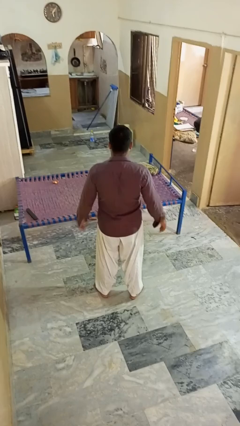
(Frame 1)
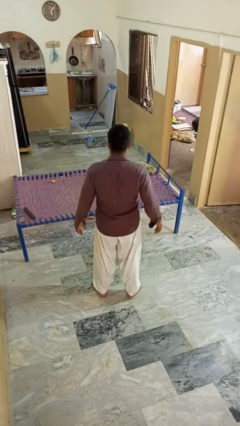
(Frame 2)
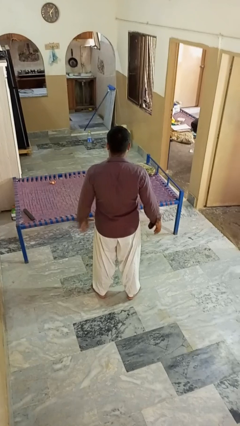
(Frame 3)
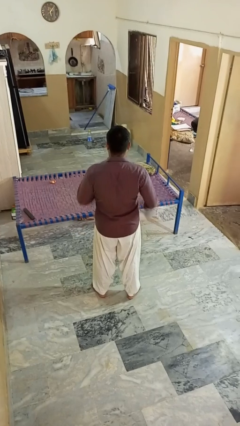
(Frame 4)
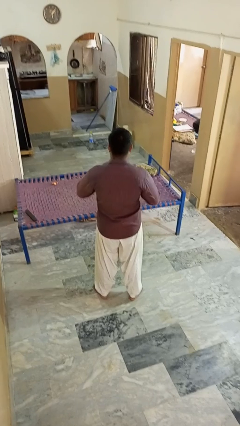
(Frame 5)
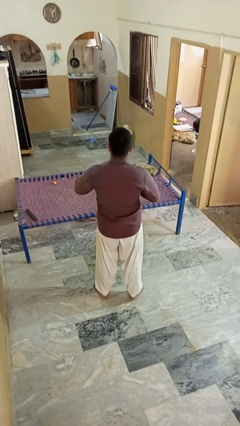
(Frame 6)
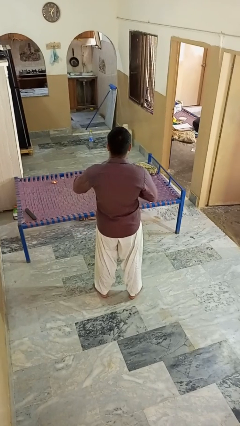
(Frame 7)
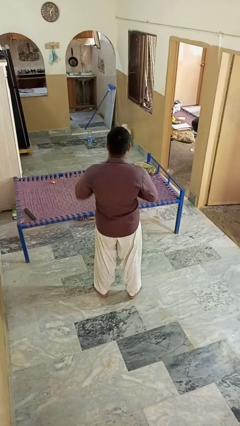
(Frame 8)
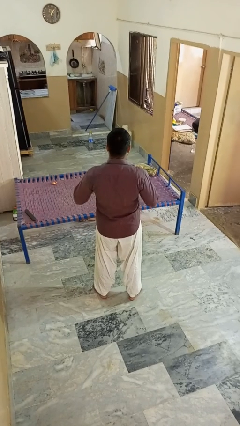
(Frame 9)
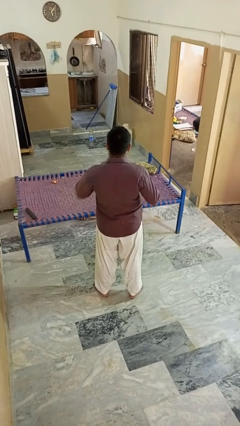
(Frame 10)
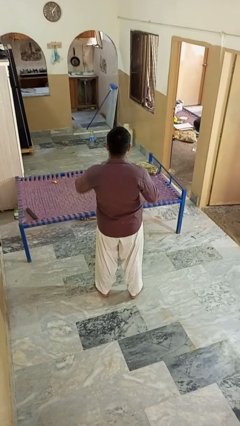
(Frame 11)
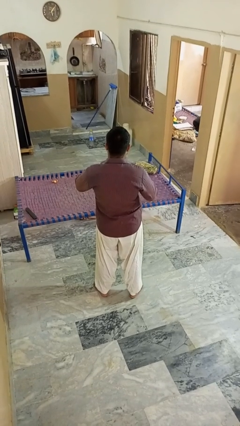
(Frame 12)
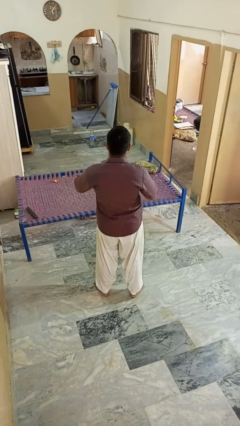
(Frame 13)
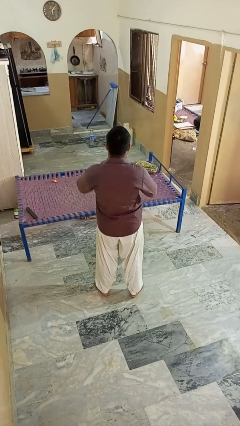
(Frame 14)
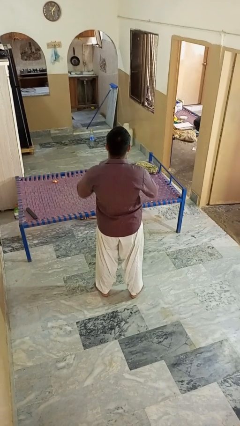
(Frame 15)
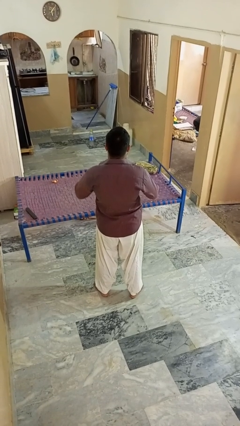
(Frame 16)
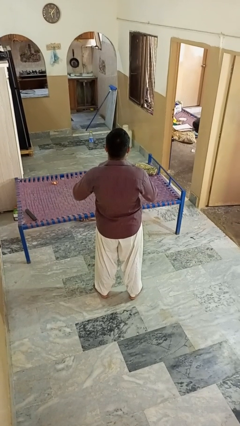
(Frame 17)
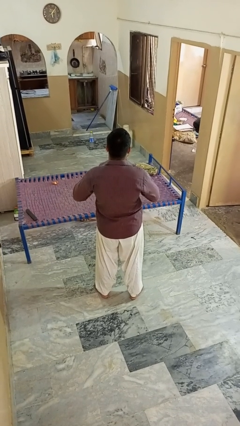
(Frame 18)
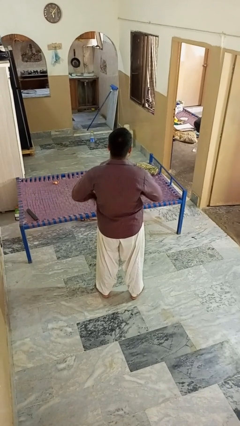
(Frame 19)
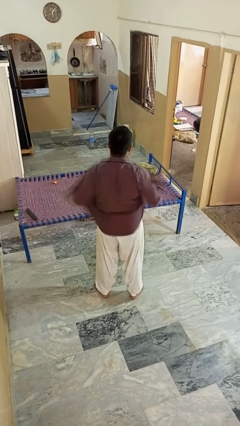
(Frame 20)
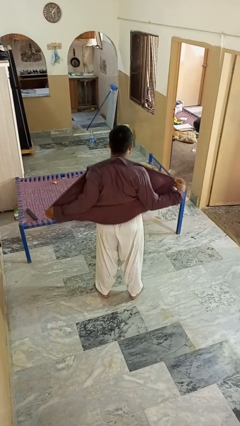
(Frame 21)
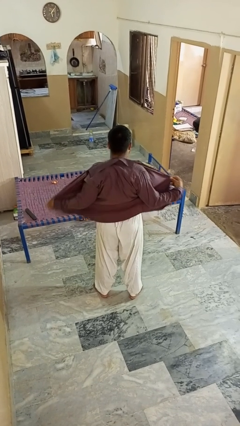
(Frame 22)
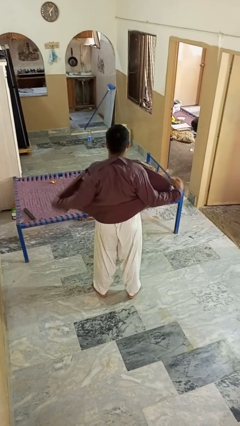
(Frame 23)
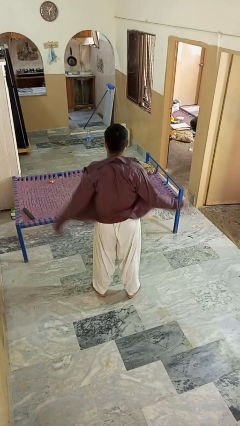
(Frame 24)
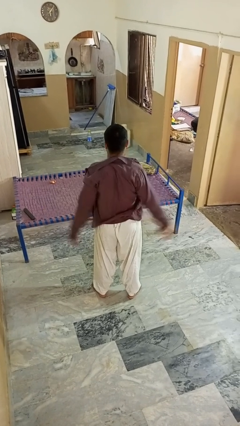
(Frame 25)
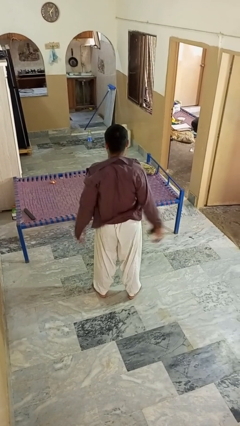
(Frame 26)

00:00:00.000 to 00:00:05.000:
person unbuttons shirt

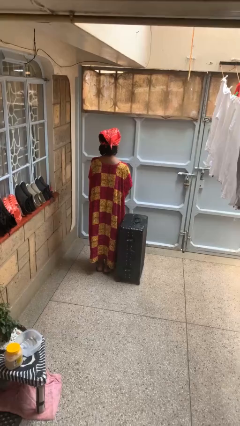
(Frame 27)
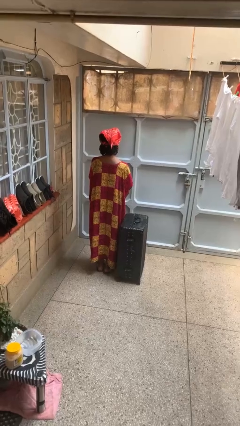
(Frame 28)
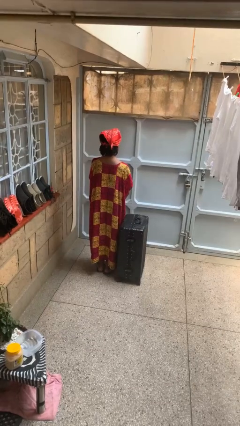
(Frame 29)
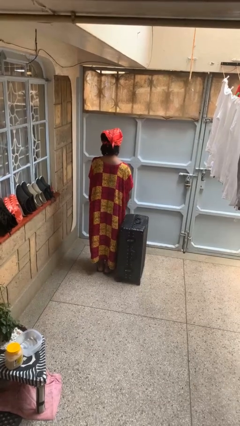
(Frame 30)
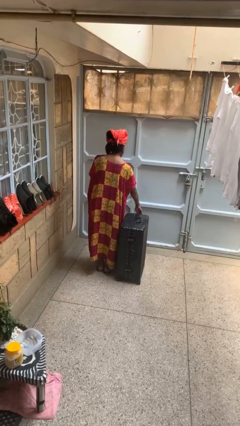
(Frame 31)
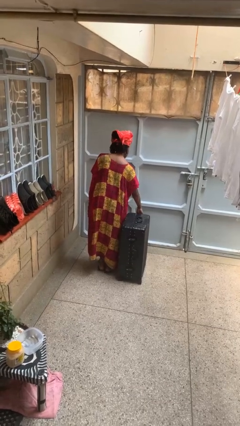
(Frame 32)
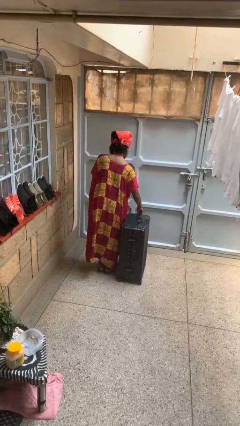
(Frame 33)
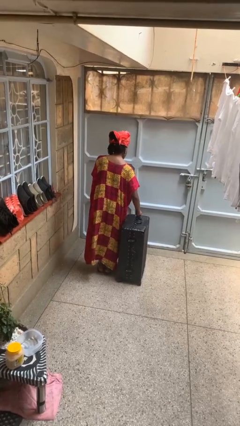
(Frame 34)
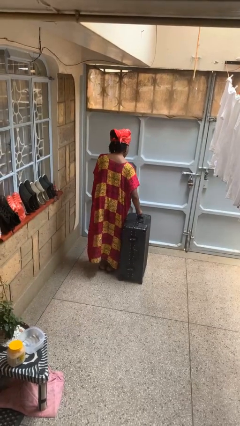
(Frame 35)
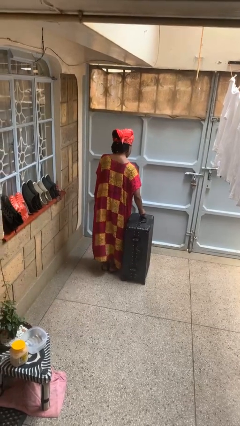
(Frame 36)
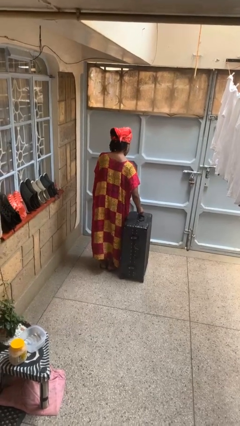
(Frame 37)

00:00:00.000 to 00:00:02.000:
person opens suitcase

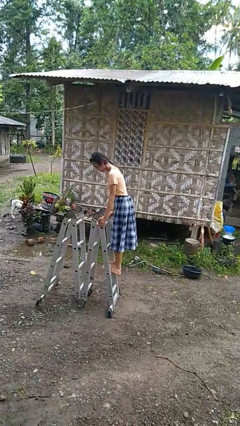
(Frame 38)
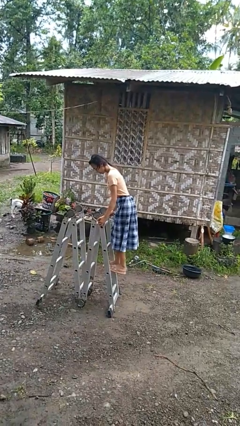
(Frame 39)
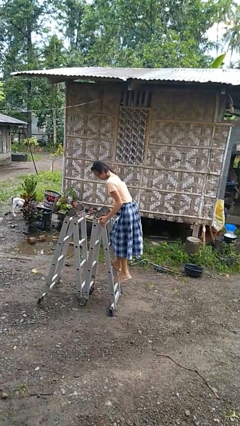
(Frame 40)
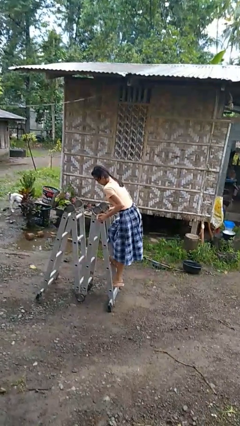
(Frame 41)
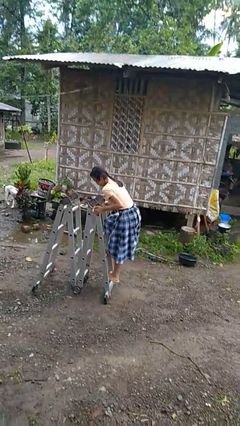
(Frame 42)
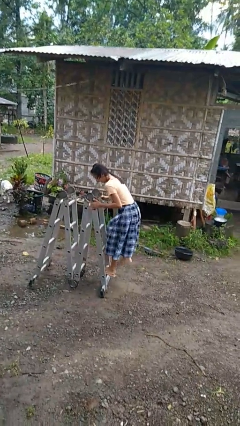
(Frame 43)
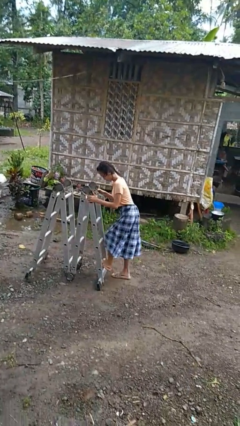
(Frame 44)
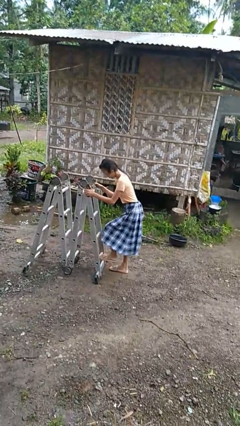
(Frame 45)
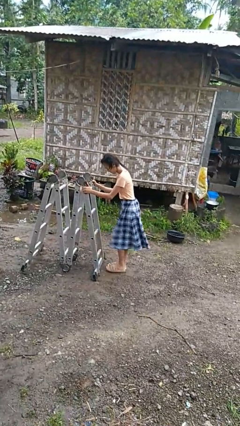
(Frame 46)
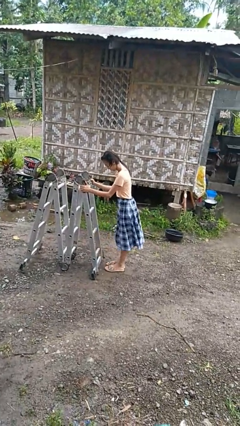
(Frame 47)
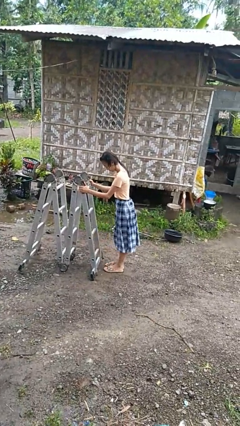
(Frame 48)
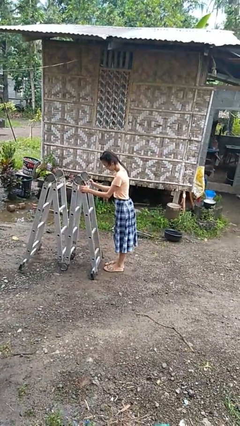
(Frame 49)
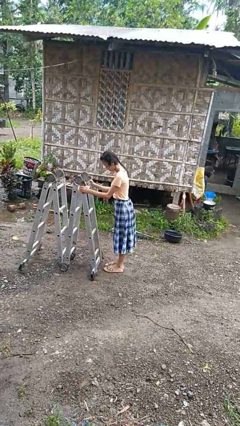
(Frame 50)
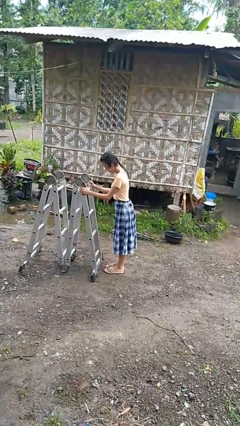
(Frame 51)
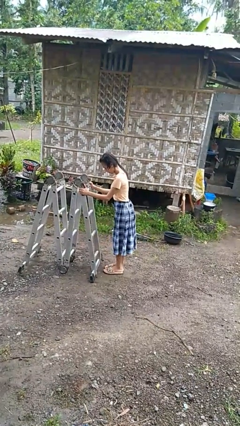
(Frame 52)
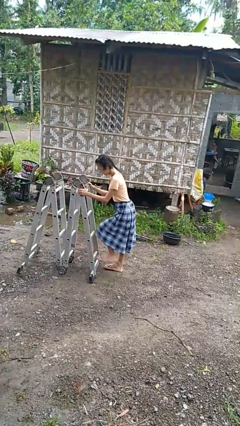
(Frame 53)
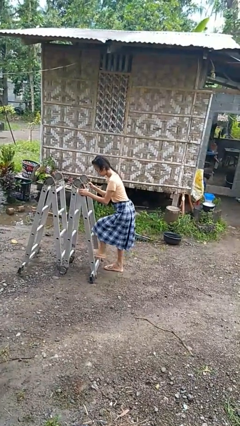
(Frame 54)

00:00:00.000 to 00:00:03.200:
person climbs down ladder

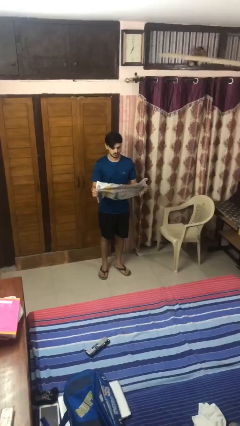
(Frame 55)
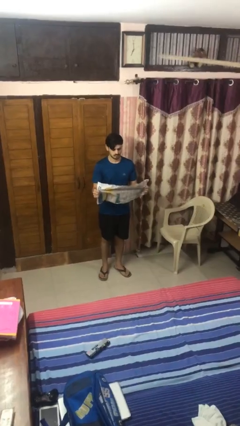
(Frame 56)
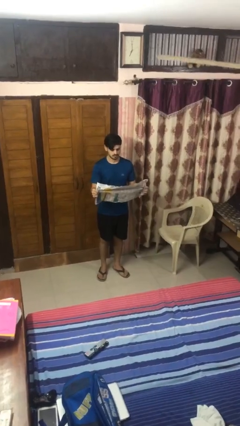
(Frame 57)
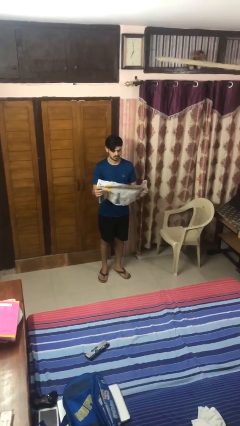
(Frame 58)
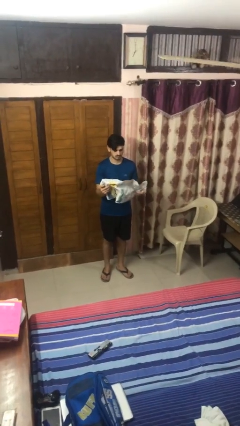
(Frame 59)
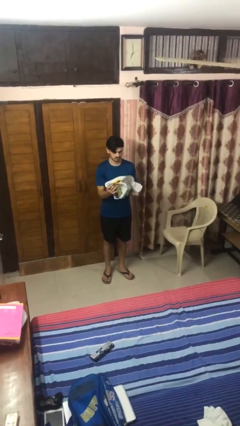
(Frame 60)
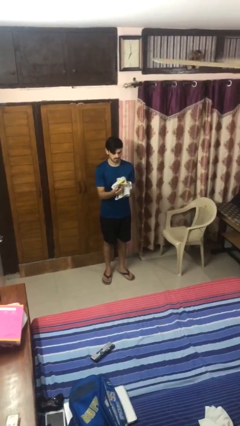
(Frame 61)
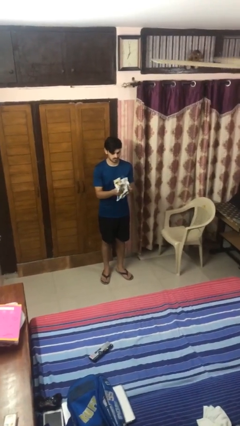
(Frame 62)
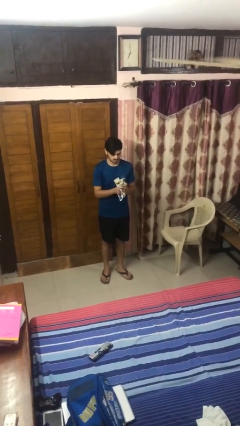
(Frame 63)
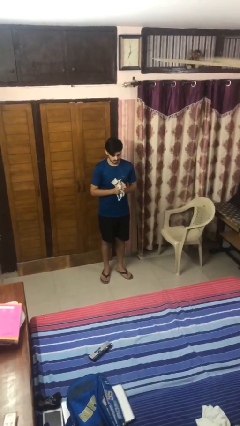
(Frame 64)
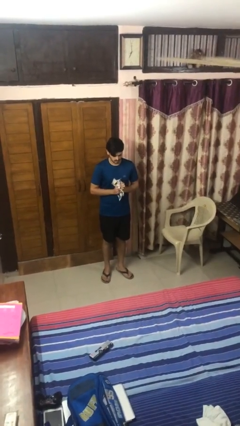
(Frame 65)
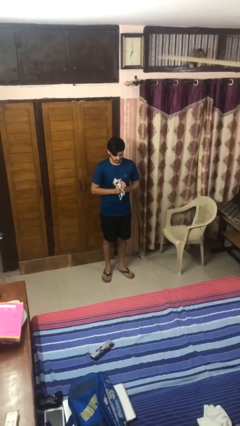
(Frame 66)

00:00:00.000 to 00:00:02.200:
person crumples paper

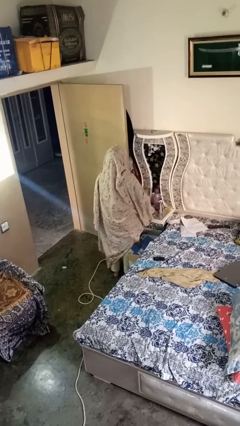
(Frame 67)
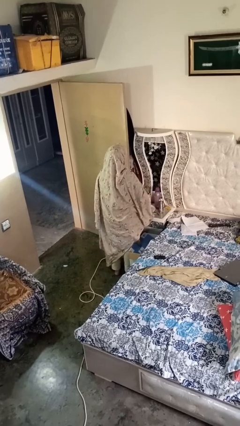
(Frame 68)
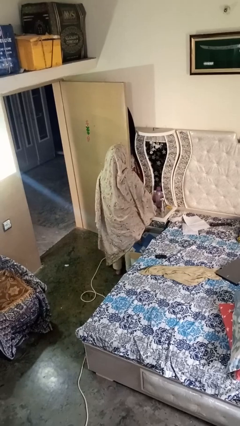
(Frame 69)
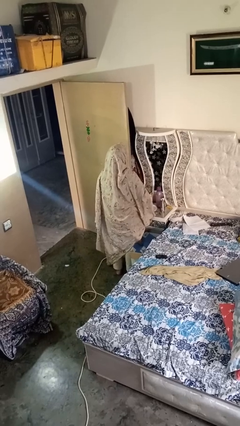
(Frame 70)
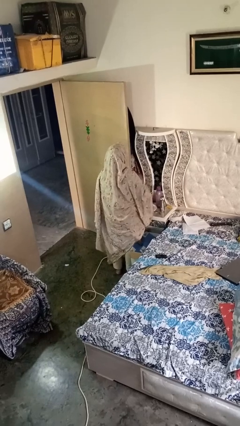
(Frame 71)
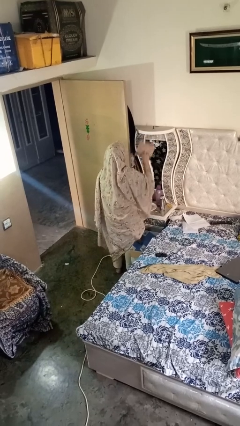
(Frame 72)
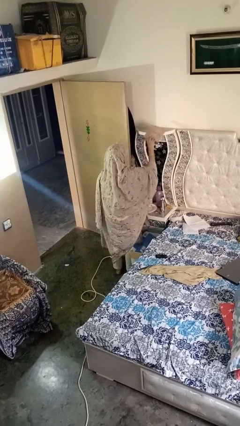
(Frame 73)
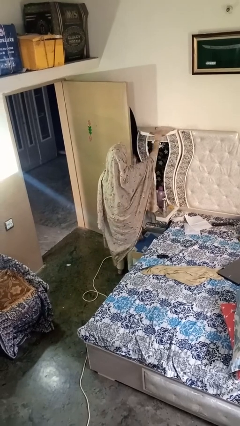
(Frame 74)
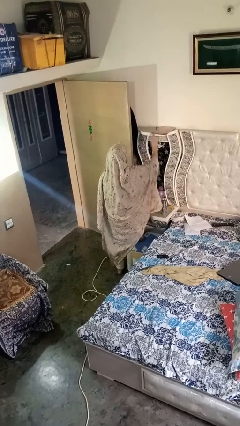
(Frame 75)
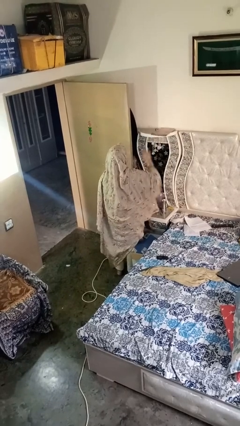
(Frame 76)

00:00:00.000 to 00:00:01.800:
person puts down object on shelf

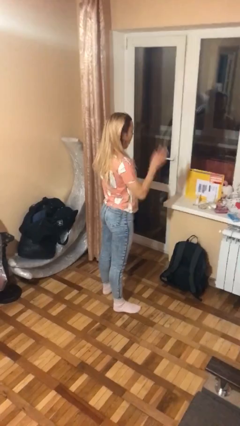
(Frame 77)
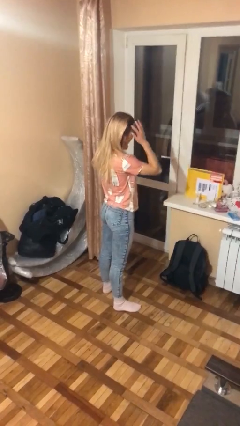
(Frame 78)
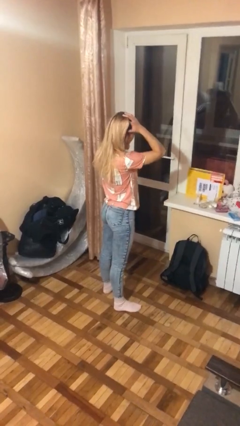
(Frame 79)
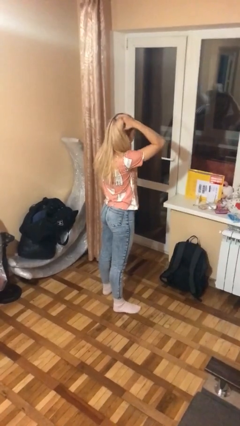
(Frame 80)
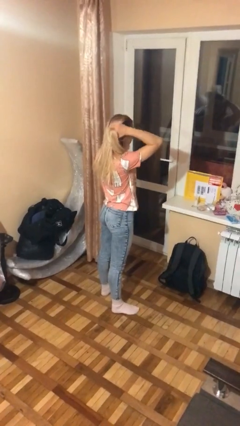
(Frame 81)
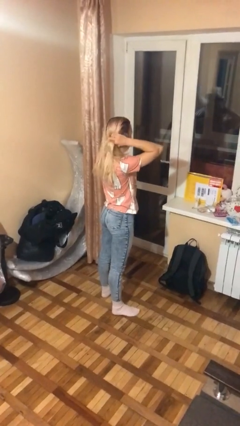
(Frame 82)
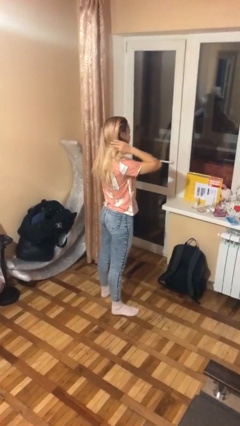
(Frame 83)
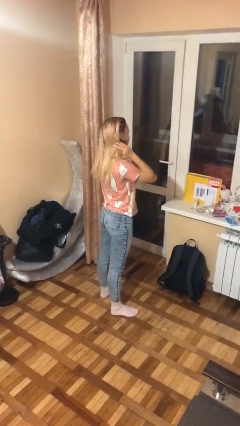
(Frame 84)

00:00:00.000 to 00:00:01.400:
person strokes hair

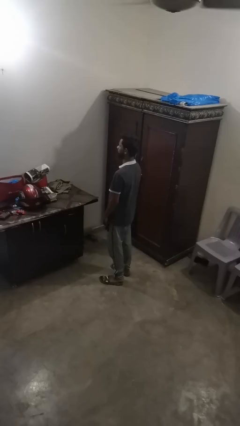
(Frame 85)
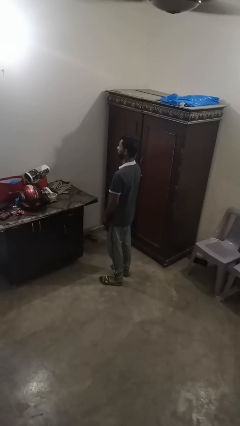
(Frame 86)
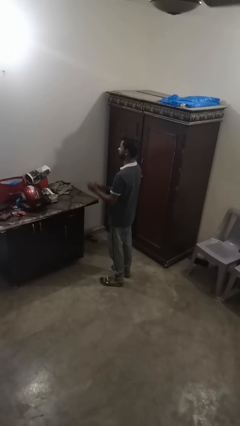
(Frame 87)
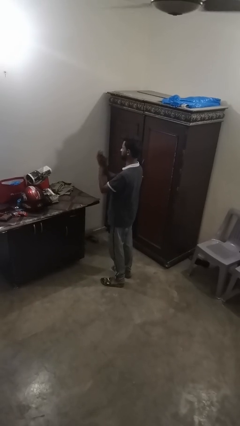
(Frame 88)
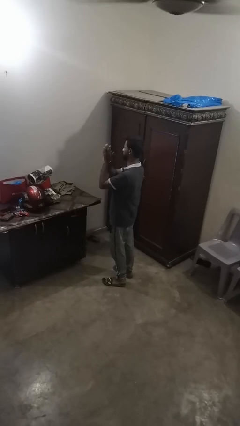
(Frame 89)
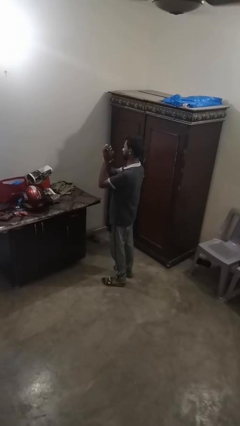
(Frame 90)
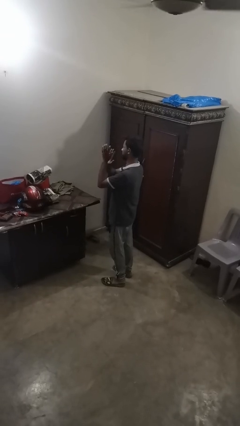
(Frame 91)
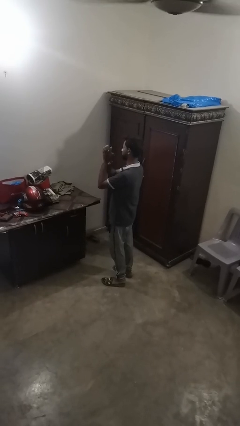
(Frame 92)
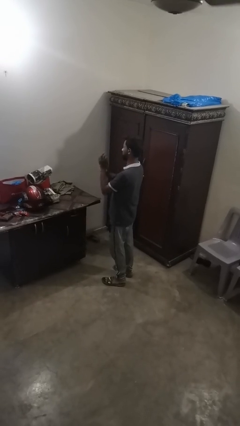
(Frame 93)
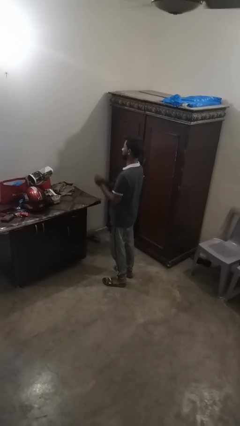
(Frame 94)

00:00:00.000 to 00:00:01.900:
person claps hands
